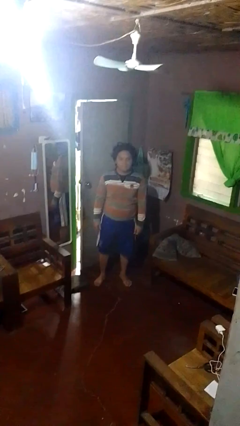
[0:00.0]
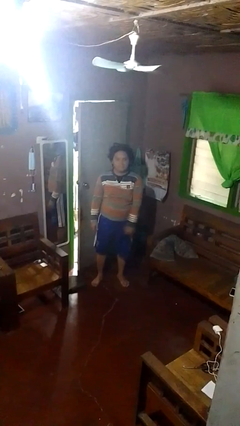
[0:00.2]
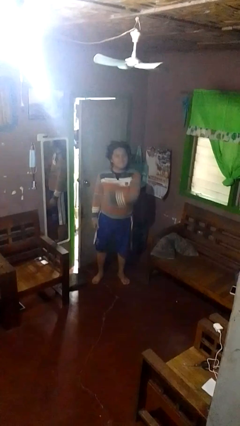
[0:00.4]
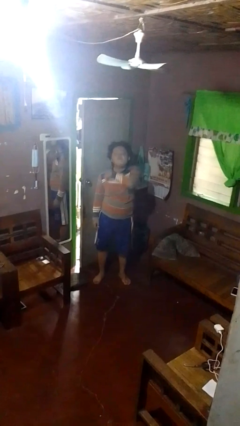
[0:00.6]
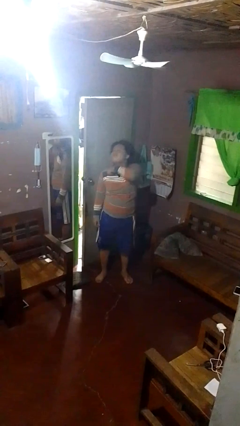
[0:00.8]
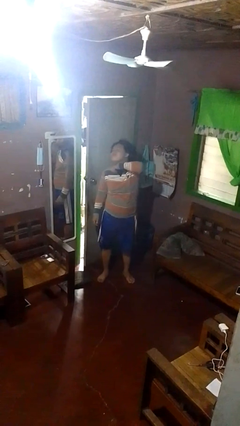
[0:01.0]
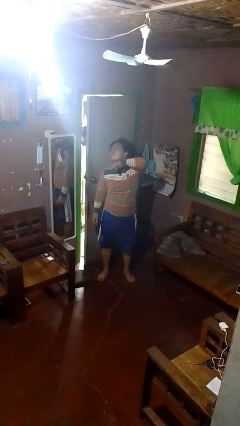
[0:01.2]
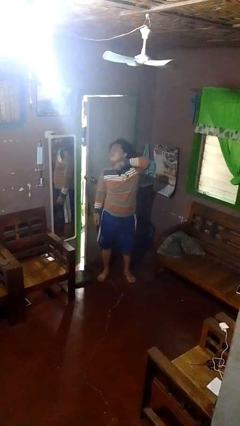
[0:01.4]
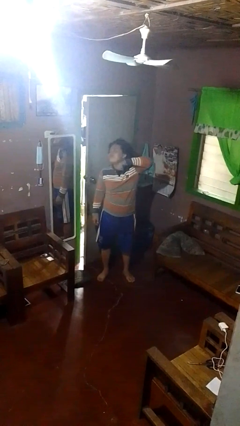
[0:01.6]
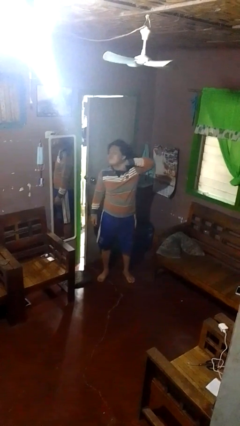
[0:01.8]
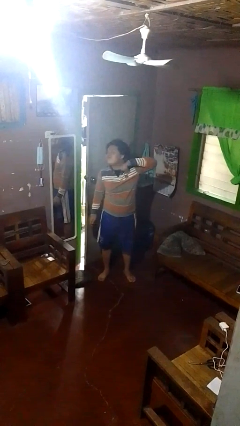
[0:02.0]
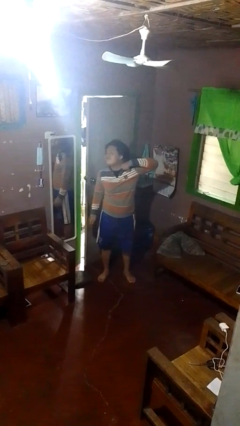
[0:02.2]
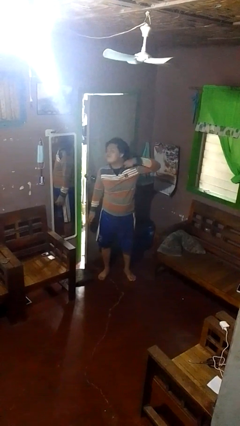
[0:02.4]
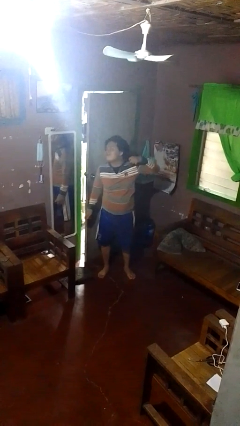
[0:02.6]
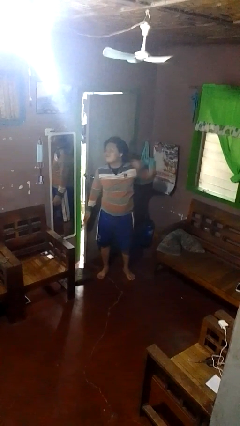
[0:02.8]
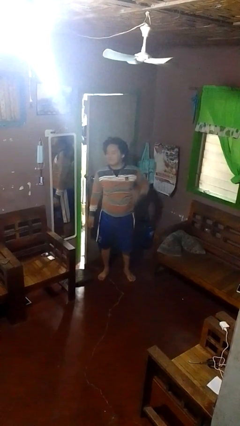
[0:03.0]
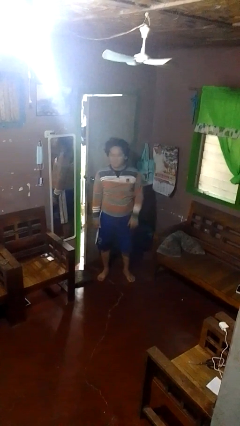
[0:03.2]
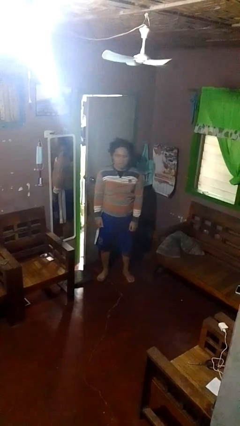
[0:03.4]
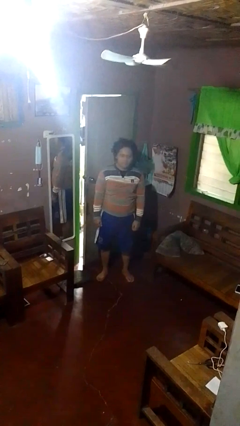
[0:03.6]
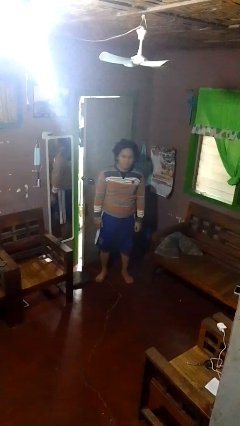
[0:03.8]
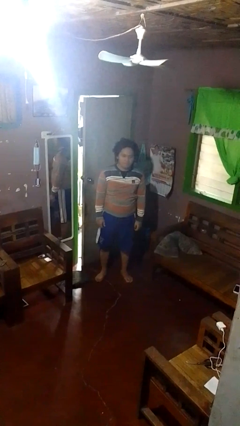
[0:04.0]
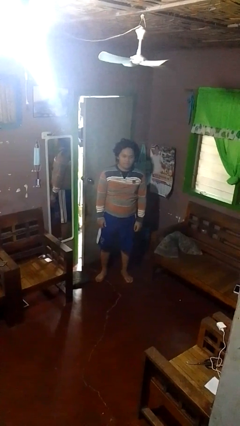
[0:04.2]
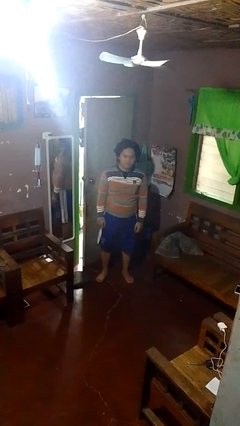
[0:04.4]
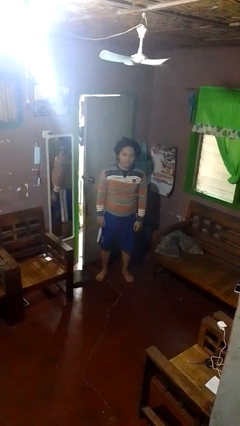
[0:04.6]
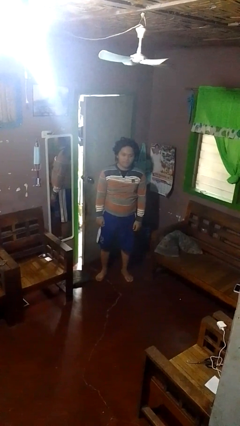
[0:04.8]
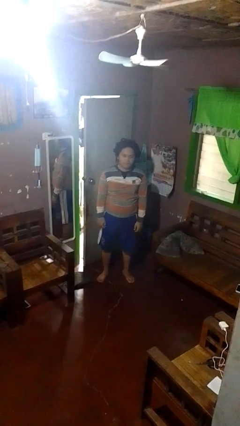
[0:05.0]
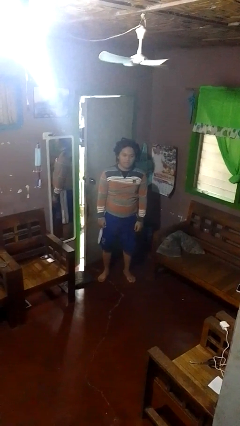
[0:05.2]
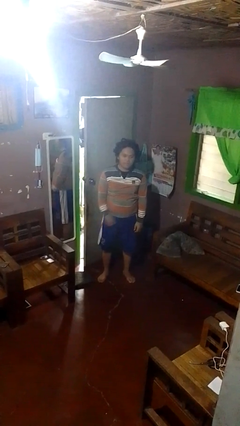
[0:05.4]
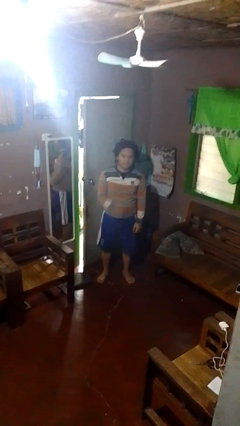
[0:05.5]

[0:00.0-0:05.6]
person dries hair with hairdryer

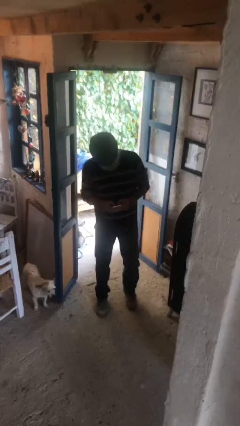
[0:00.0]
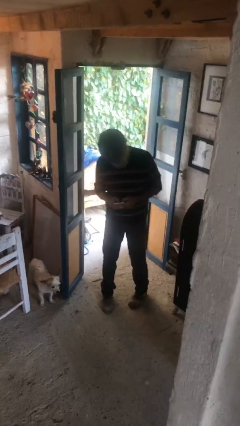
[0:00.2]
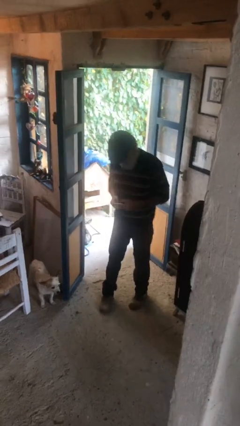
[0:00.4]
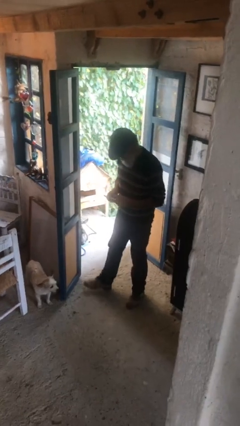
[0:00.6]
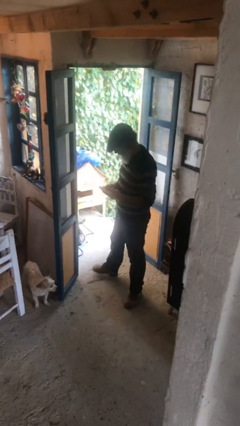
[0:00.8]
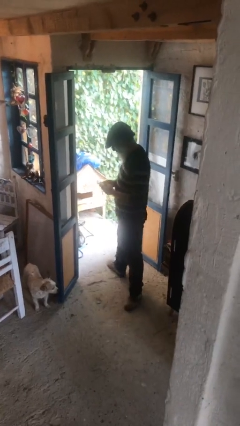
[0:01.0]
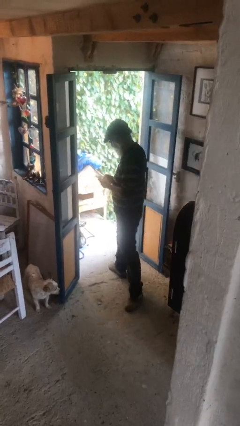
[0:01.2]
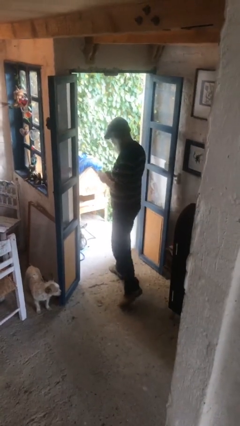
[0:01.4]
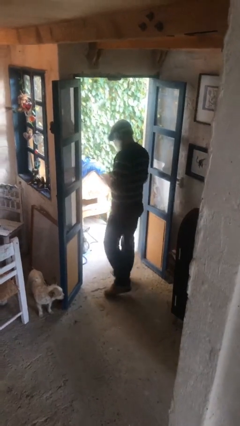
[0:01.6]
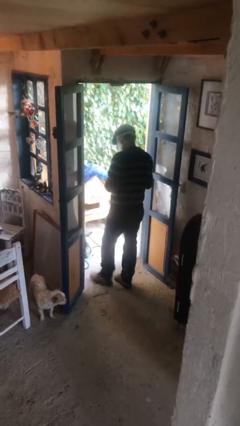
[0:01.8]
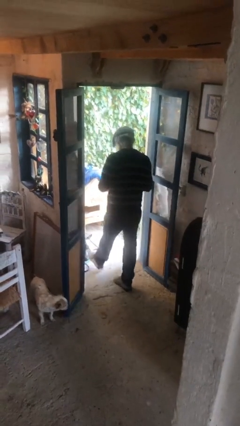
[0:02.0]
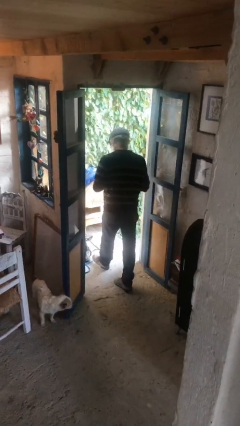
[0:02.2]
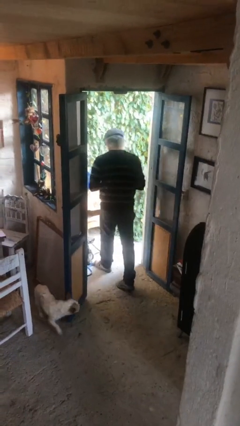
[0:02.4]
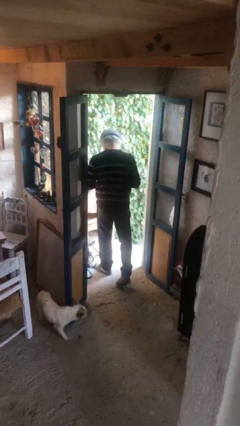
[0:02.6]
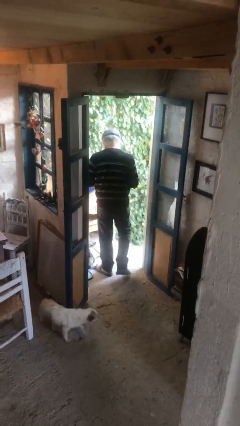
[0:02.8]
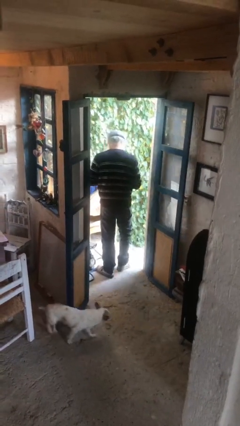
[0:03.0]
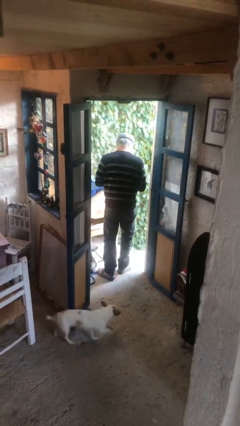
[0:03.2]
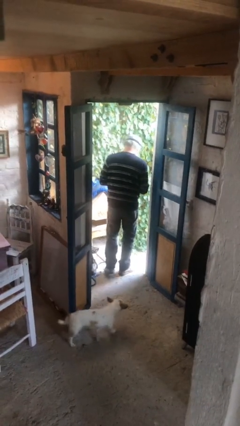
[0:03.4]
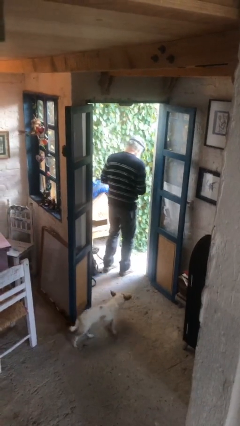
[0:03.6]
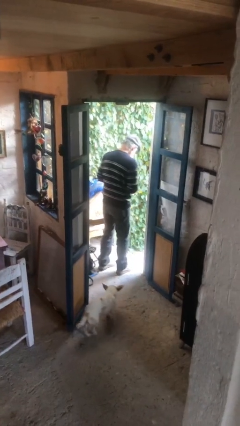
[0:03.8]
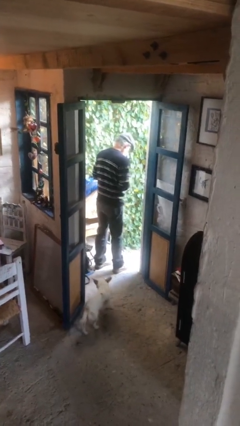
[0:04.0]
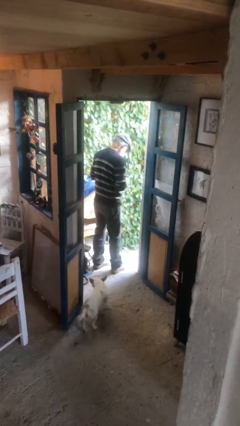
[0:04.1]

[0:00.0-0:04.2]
person exits scene through structure

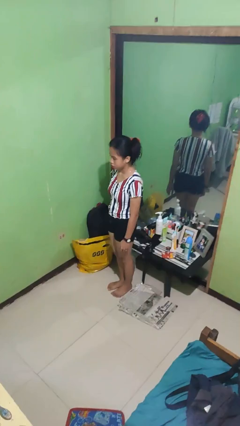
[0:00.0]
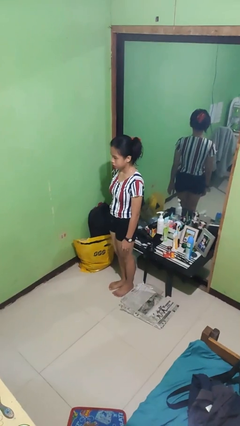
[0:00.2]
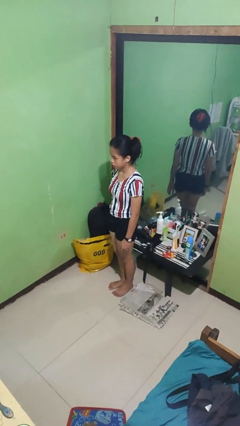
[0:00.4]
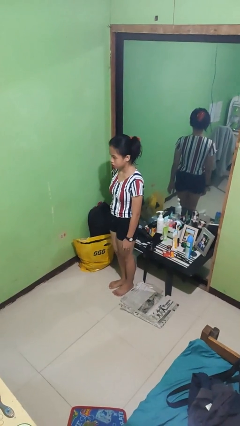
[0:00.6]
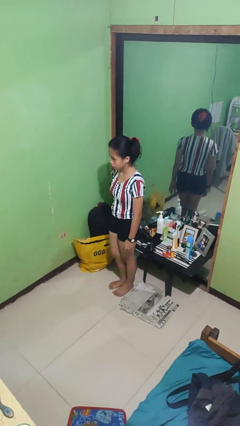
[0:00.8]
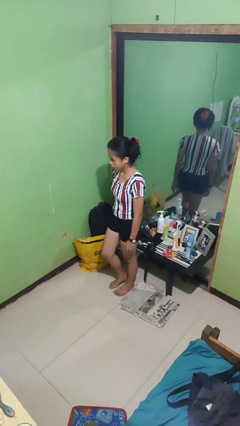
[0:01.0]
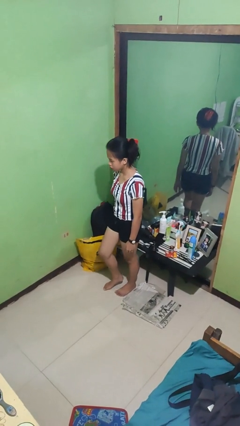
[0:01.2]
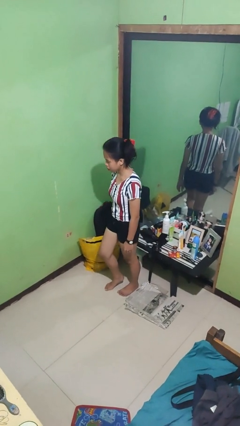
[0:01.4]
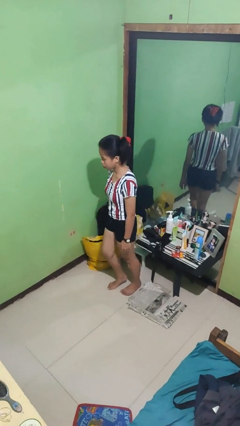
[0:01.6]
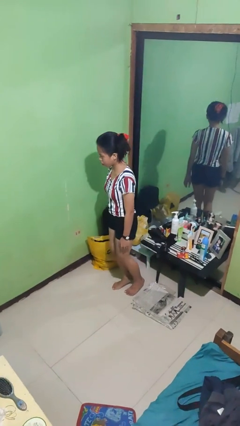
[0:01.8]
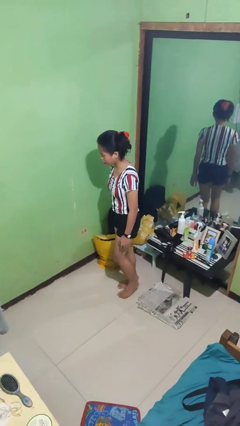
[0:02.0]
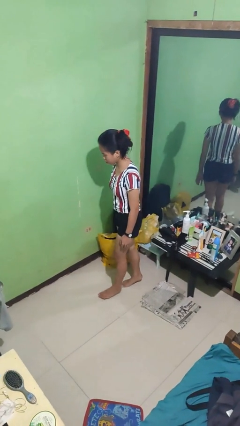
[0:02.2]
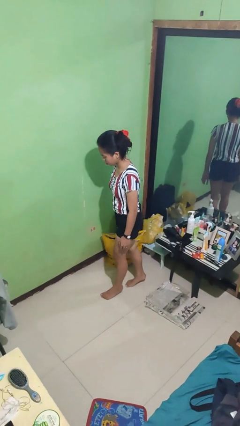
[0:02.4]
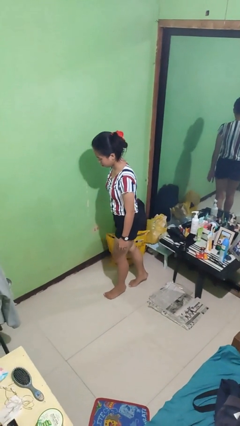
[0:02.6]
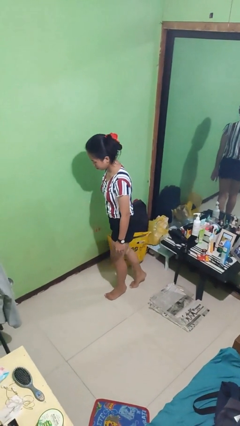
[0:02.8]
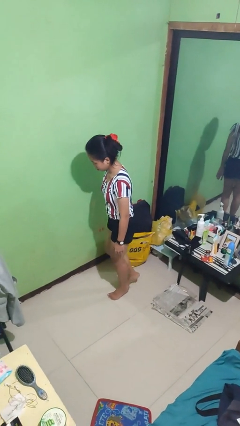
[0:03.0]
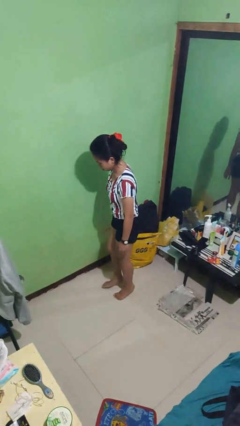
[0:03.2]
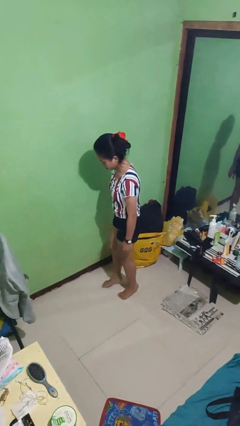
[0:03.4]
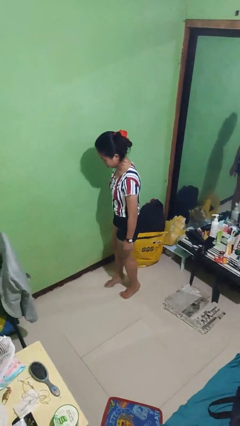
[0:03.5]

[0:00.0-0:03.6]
person walks tiptoe

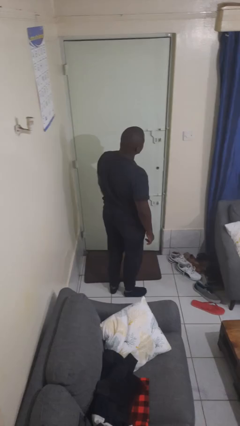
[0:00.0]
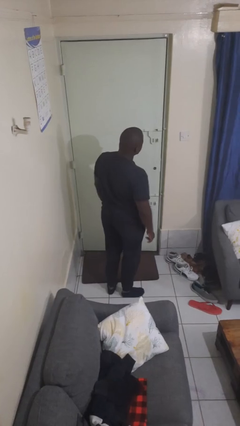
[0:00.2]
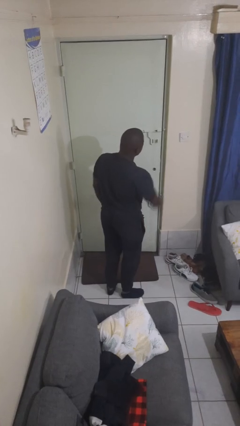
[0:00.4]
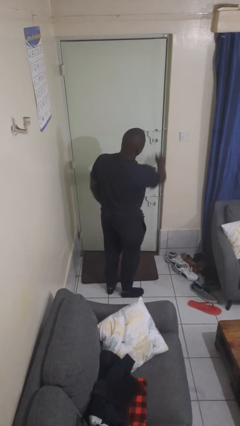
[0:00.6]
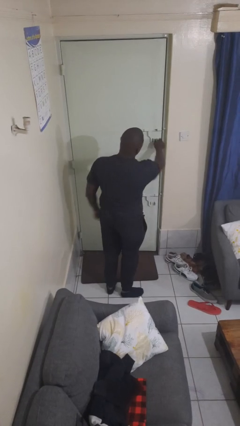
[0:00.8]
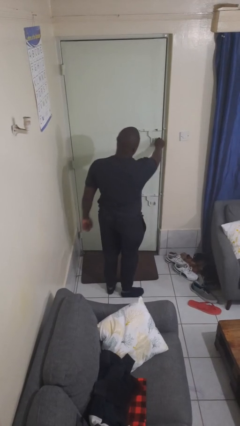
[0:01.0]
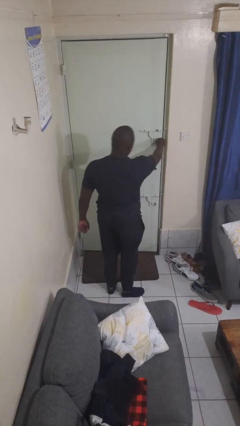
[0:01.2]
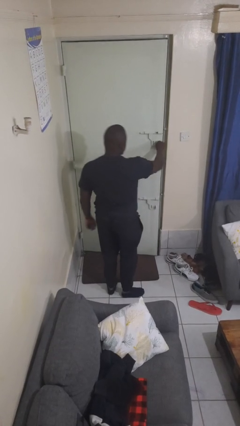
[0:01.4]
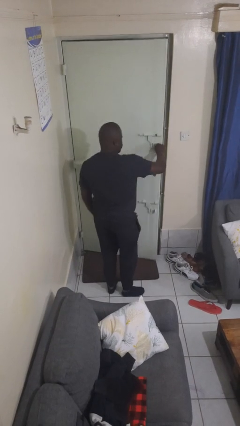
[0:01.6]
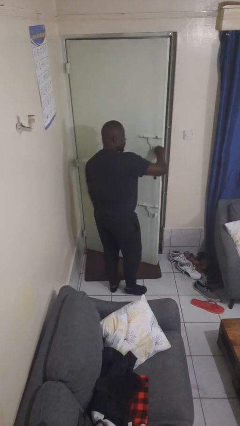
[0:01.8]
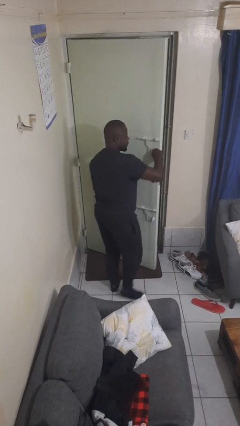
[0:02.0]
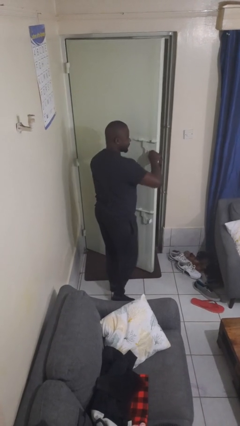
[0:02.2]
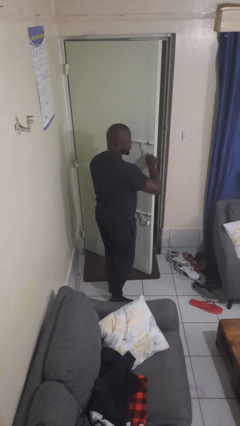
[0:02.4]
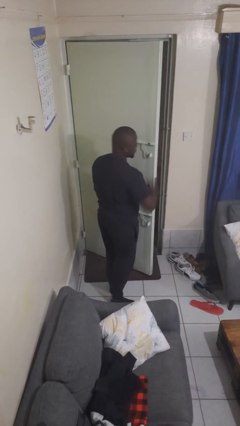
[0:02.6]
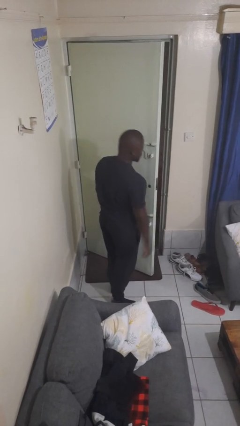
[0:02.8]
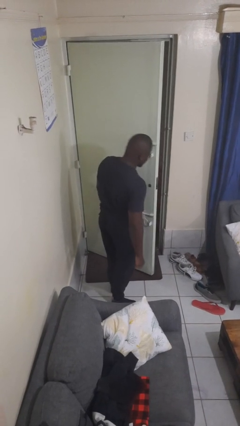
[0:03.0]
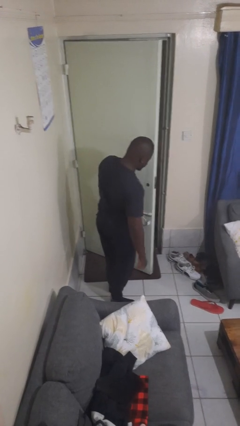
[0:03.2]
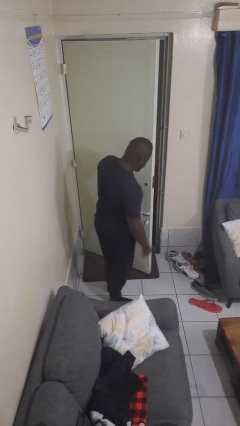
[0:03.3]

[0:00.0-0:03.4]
person opens facility door

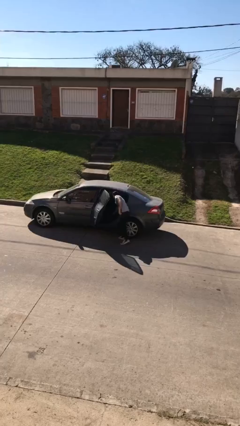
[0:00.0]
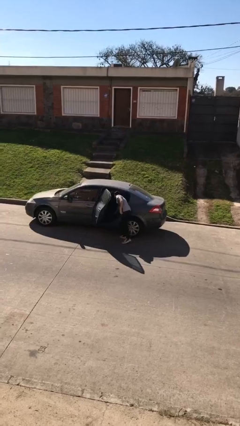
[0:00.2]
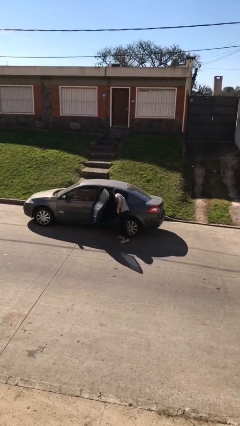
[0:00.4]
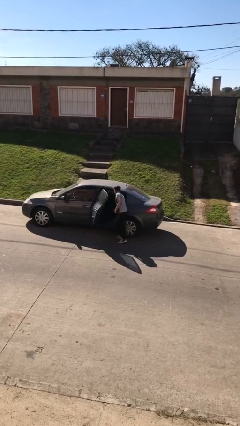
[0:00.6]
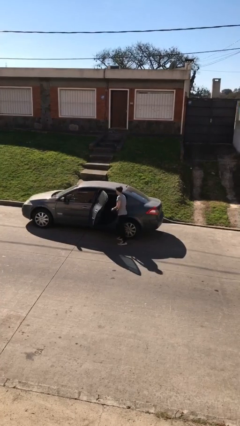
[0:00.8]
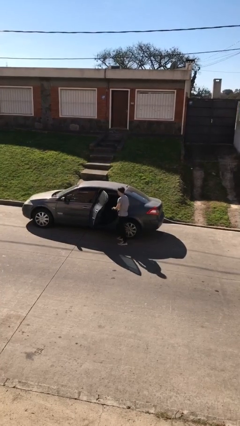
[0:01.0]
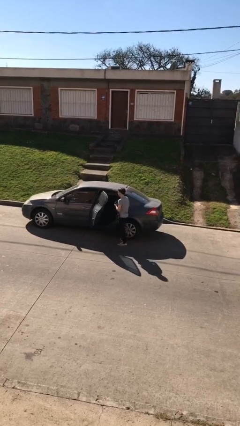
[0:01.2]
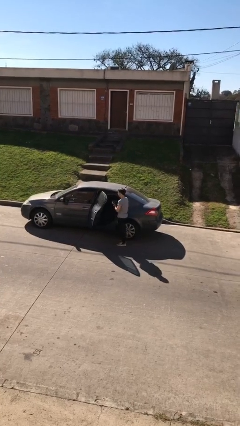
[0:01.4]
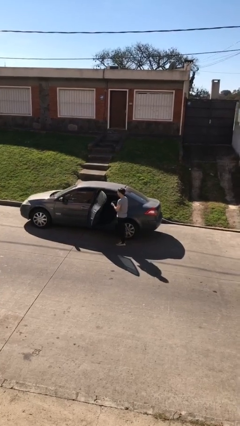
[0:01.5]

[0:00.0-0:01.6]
person unloads car
